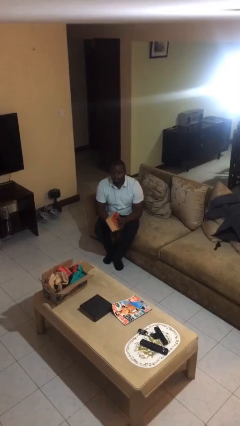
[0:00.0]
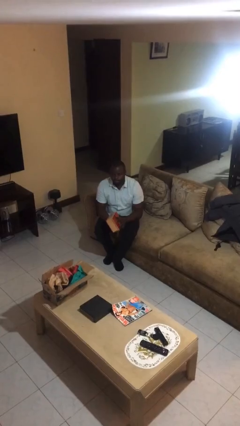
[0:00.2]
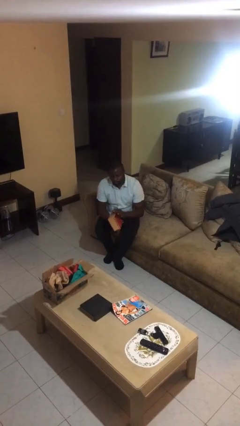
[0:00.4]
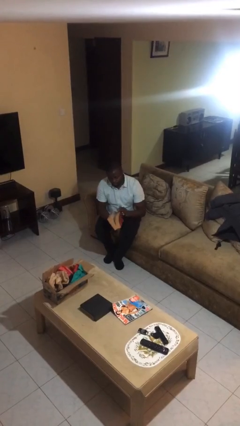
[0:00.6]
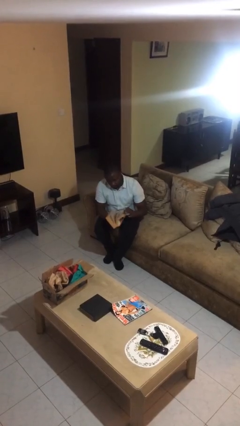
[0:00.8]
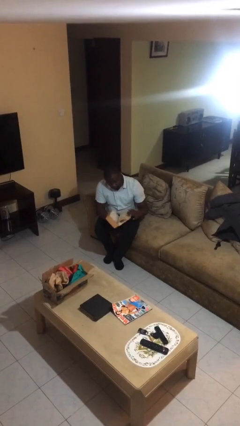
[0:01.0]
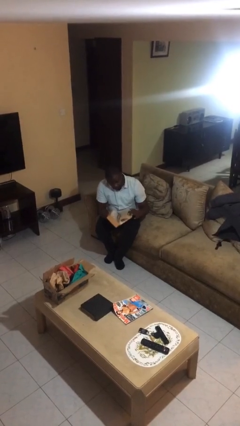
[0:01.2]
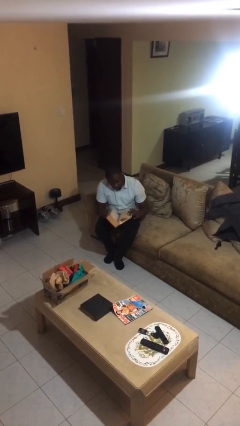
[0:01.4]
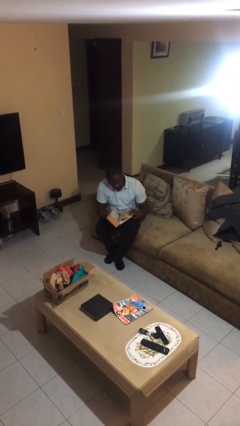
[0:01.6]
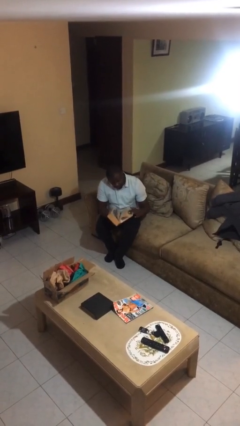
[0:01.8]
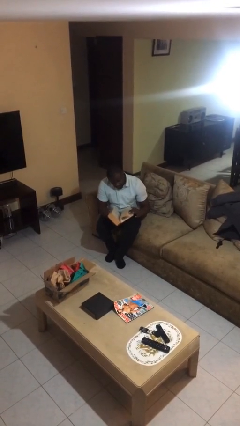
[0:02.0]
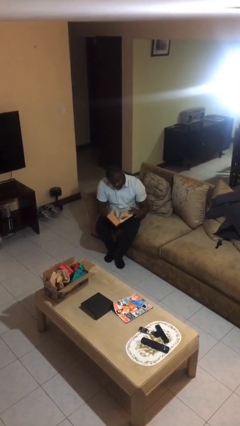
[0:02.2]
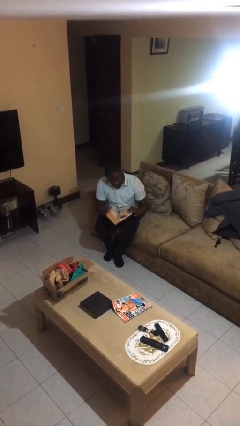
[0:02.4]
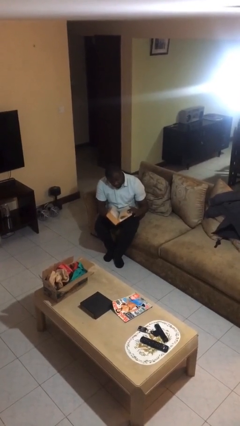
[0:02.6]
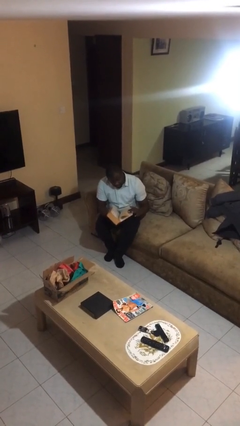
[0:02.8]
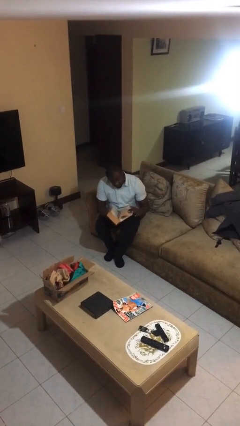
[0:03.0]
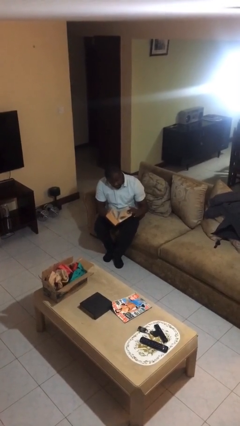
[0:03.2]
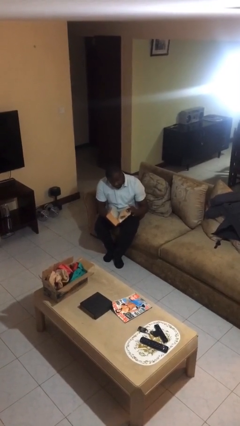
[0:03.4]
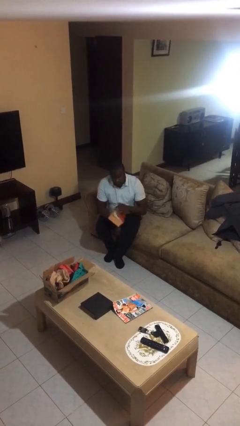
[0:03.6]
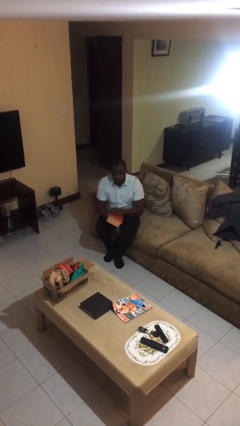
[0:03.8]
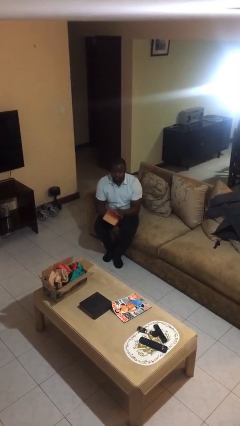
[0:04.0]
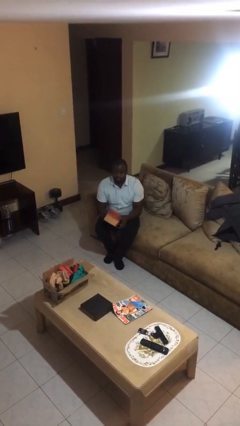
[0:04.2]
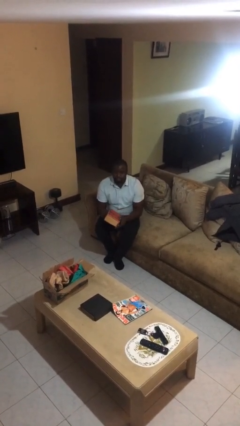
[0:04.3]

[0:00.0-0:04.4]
person reads book

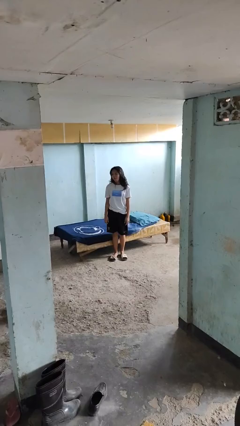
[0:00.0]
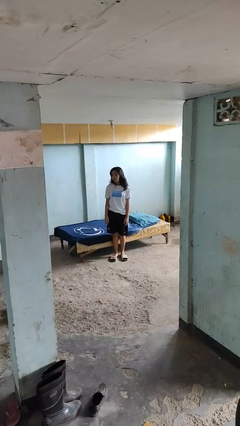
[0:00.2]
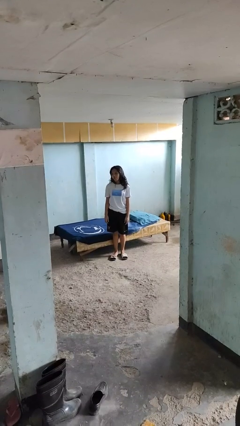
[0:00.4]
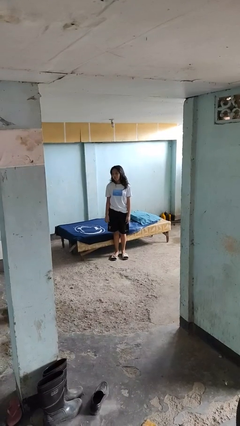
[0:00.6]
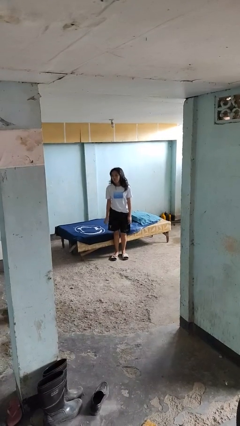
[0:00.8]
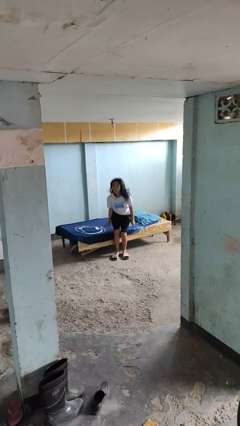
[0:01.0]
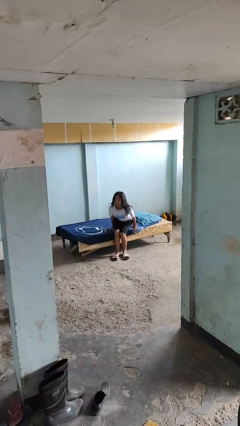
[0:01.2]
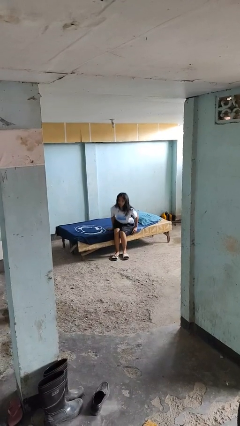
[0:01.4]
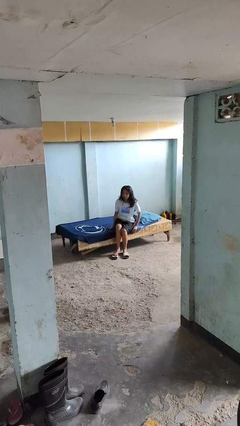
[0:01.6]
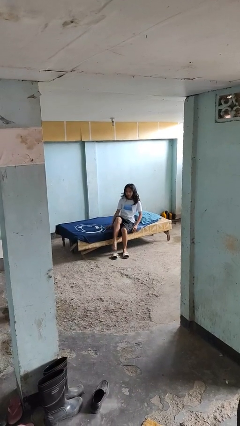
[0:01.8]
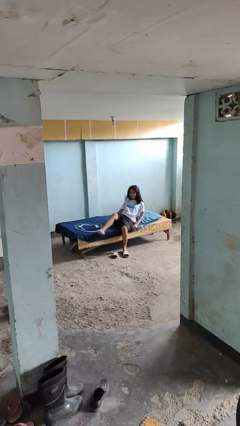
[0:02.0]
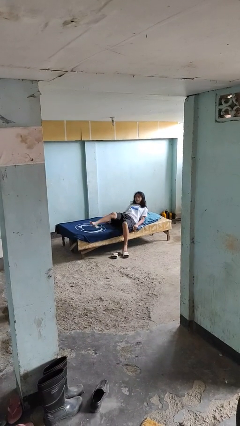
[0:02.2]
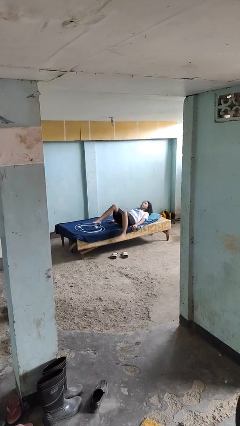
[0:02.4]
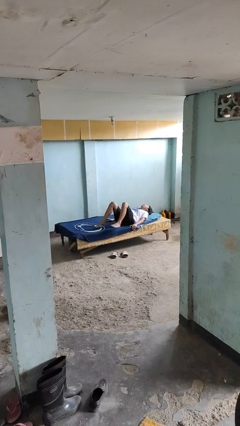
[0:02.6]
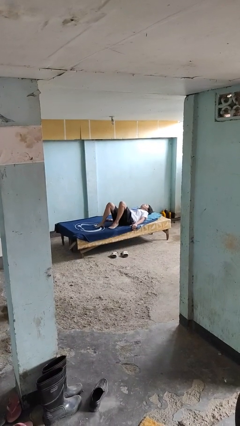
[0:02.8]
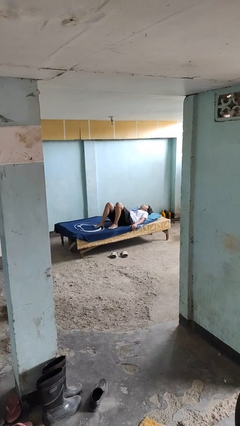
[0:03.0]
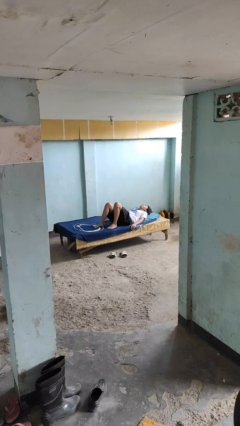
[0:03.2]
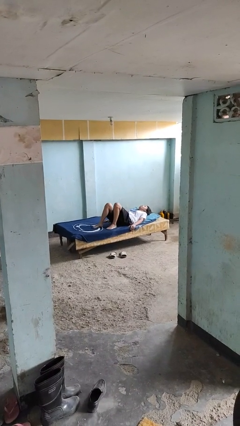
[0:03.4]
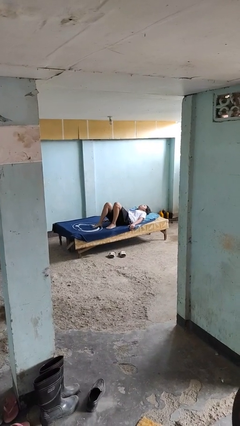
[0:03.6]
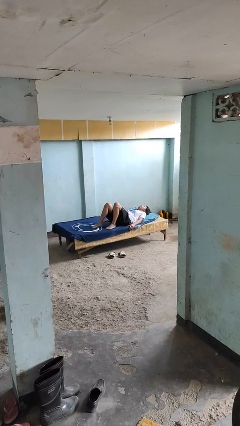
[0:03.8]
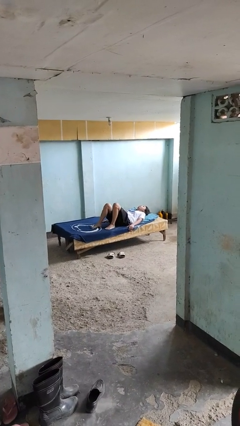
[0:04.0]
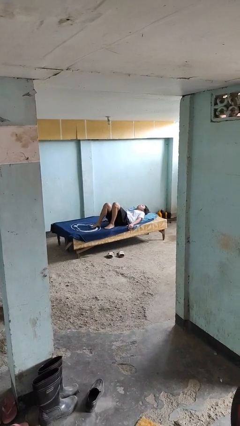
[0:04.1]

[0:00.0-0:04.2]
person lies down on bed

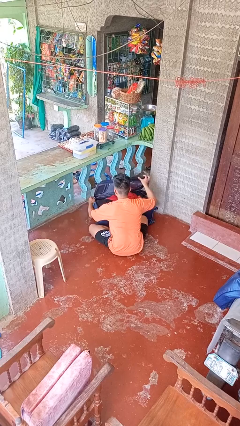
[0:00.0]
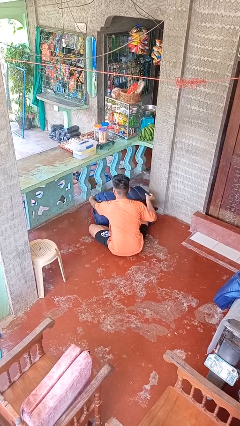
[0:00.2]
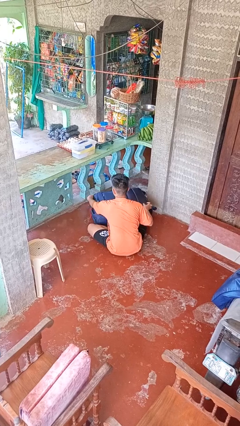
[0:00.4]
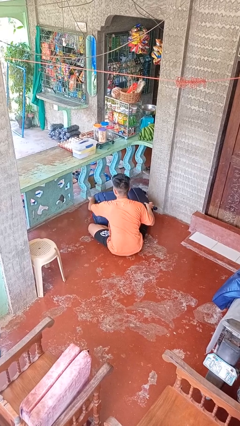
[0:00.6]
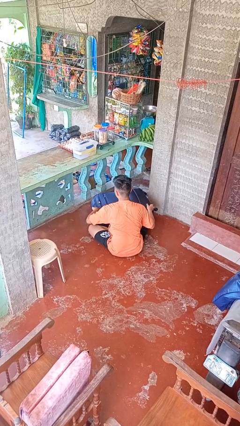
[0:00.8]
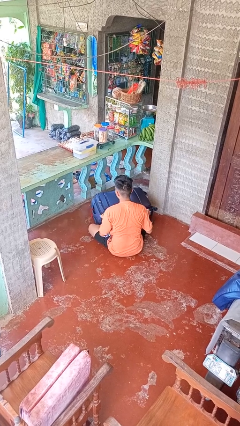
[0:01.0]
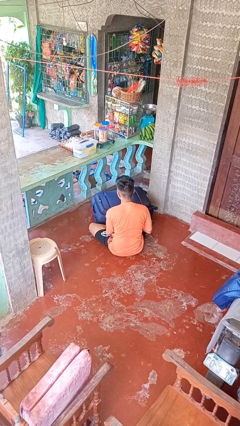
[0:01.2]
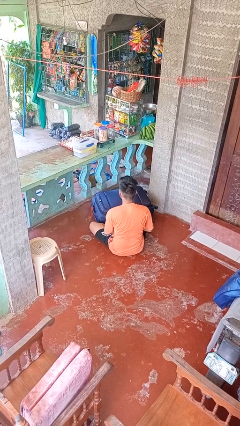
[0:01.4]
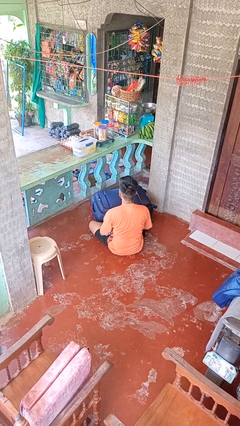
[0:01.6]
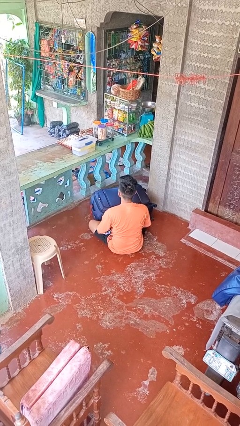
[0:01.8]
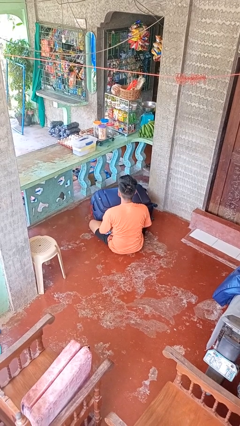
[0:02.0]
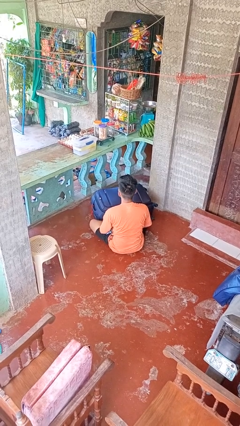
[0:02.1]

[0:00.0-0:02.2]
person closes suitcase

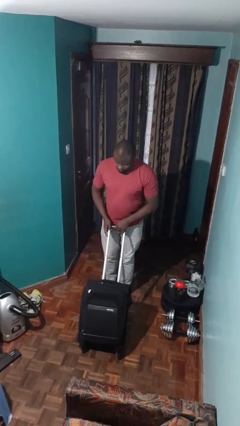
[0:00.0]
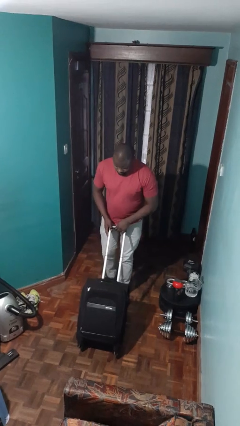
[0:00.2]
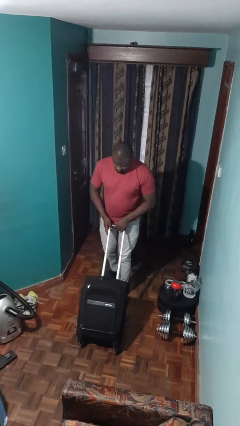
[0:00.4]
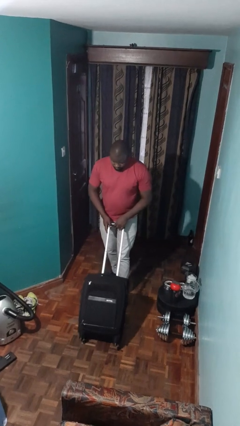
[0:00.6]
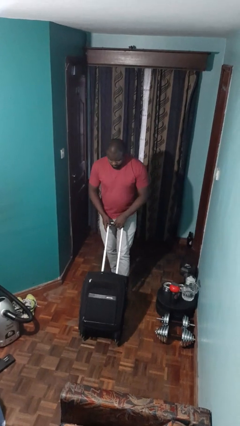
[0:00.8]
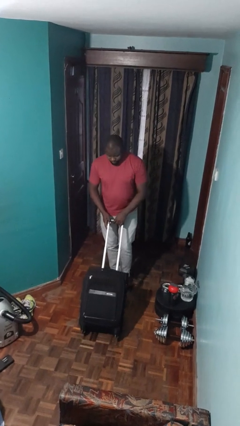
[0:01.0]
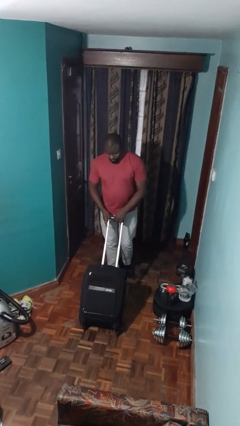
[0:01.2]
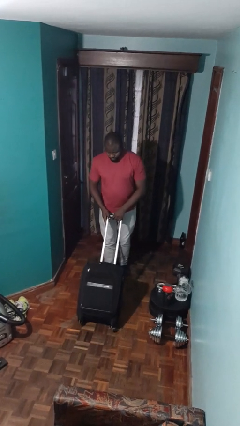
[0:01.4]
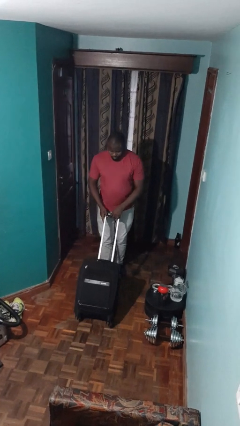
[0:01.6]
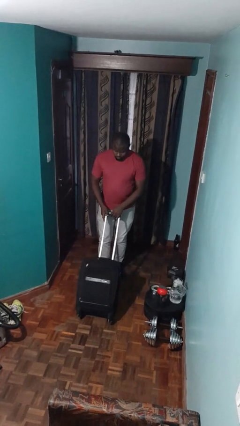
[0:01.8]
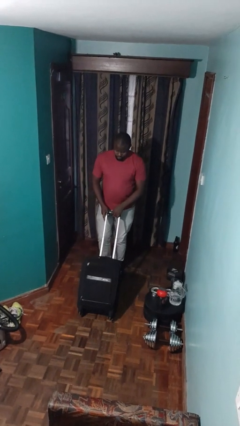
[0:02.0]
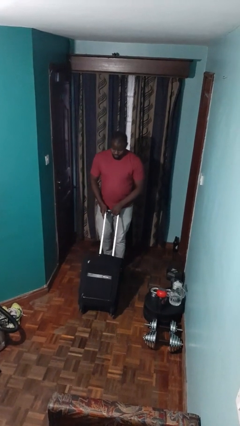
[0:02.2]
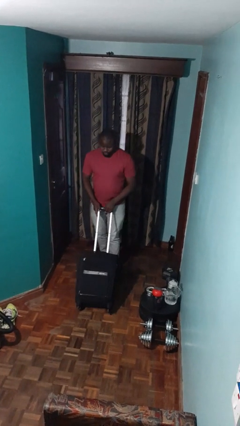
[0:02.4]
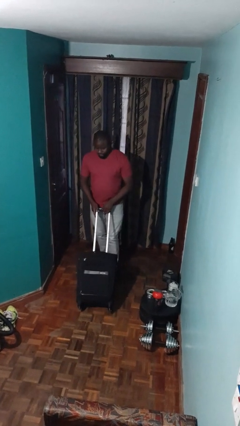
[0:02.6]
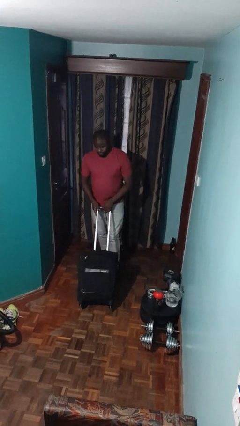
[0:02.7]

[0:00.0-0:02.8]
person pulls wheeled cart

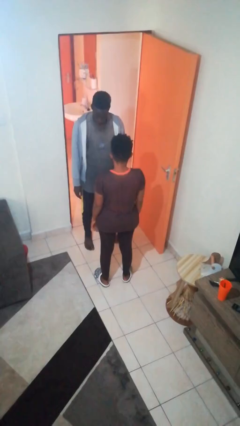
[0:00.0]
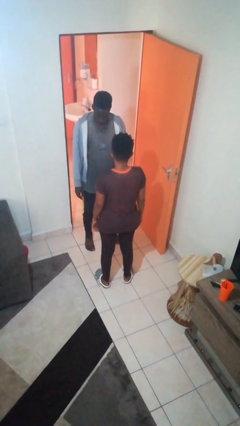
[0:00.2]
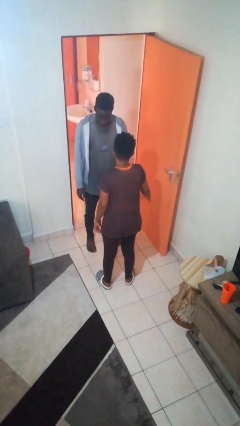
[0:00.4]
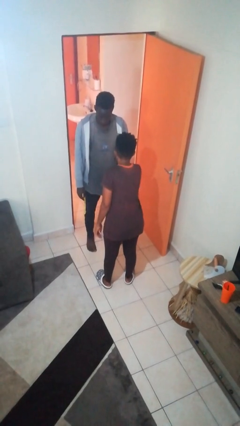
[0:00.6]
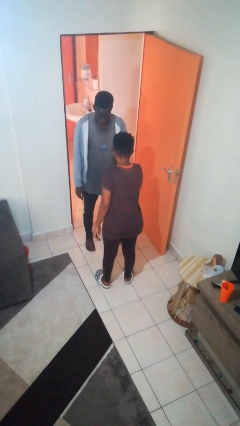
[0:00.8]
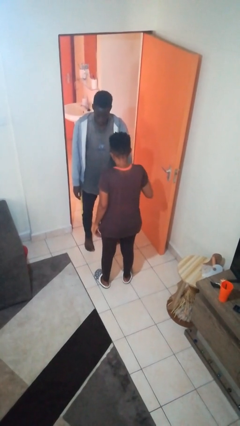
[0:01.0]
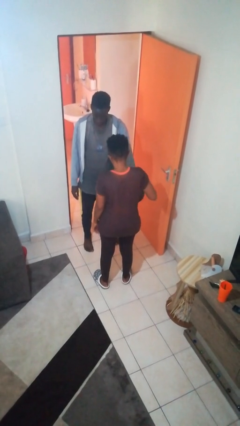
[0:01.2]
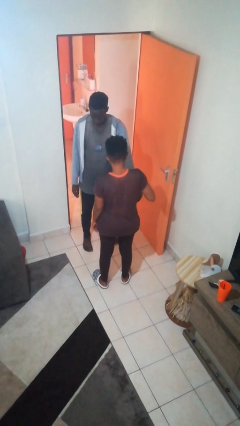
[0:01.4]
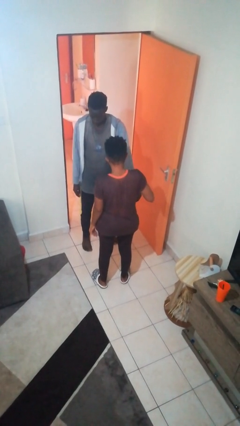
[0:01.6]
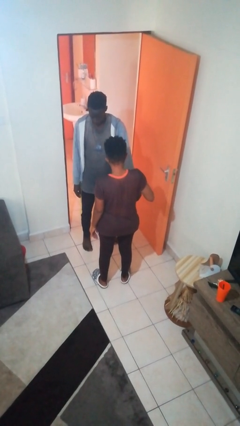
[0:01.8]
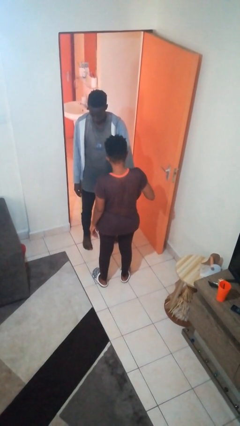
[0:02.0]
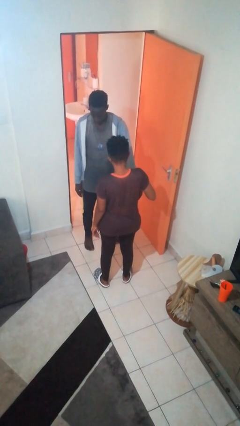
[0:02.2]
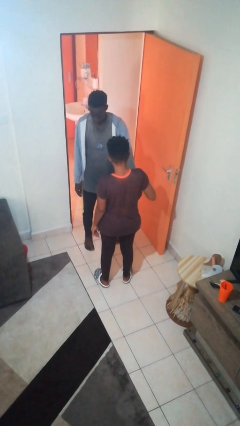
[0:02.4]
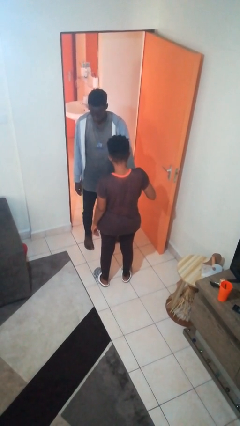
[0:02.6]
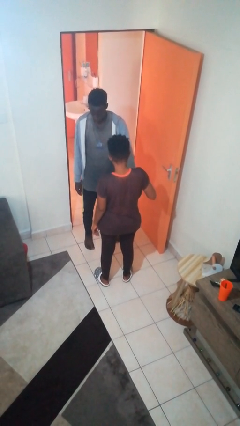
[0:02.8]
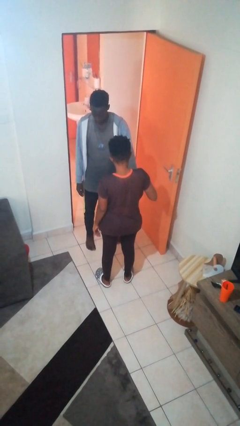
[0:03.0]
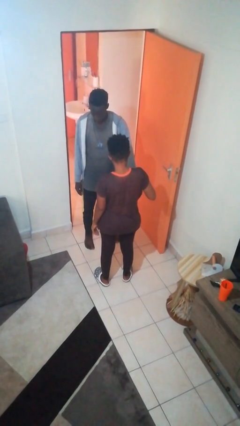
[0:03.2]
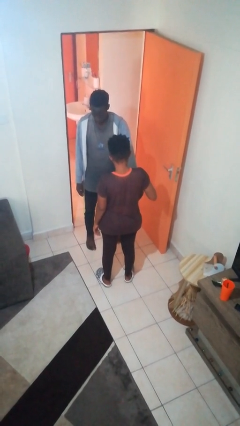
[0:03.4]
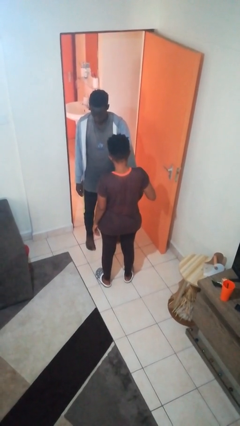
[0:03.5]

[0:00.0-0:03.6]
person grabs person by forearm

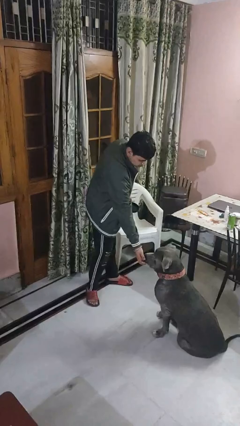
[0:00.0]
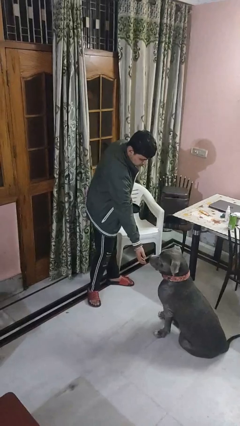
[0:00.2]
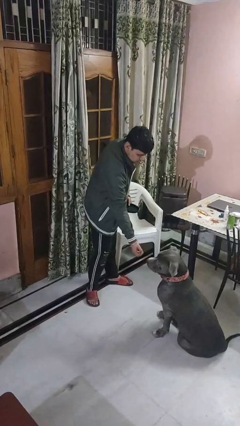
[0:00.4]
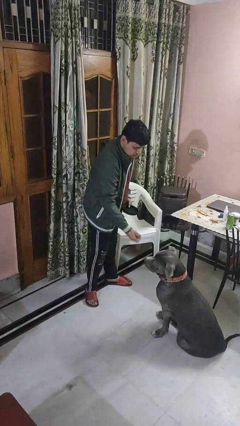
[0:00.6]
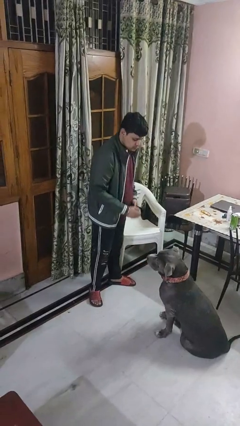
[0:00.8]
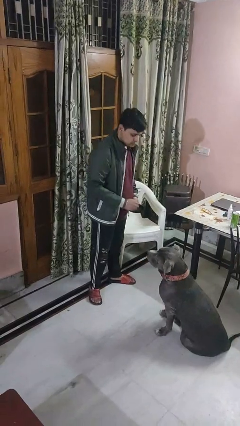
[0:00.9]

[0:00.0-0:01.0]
person feeds dog
